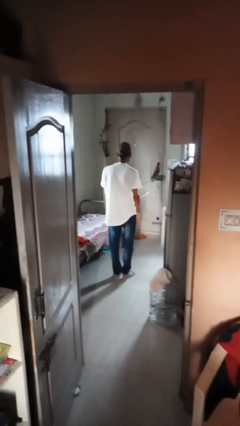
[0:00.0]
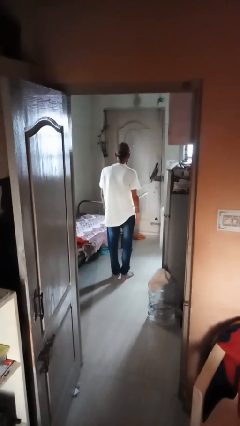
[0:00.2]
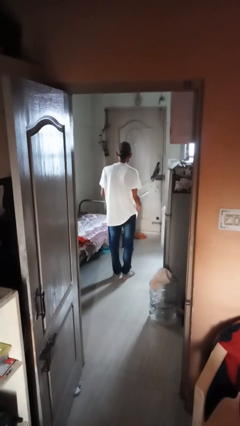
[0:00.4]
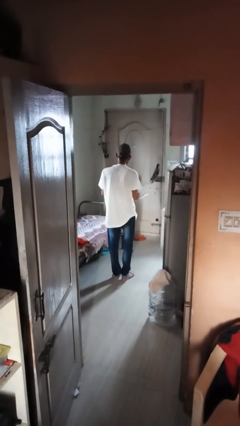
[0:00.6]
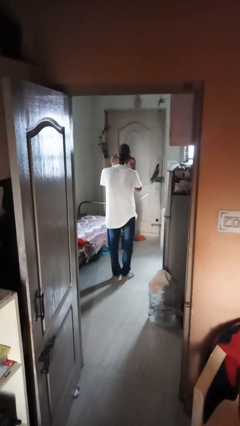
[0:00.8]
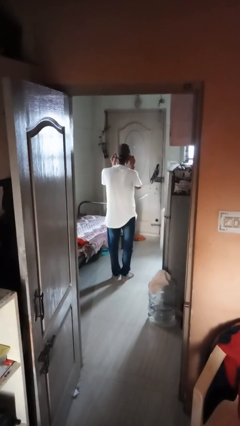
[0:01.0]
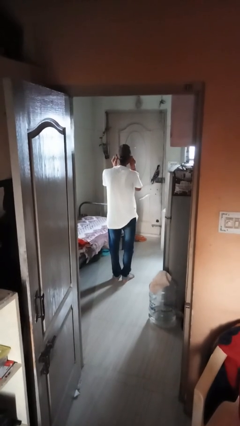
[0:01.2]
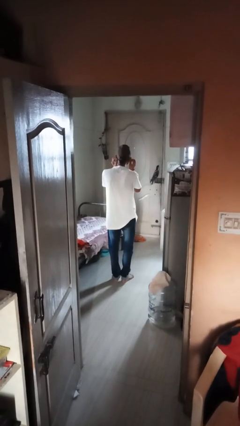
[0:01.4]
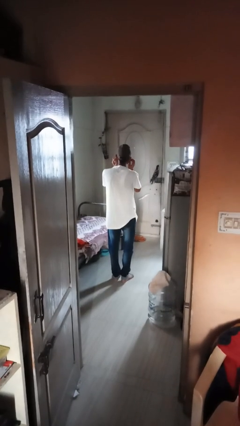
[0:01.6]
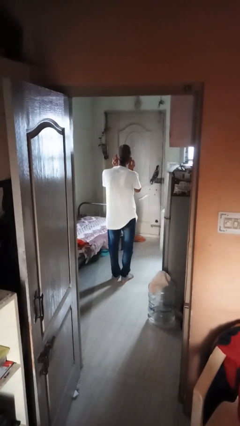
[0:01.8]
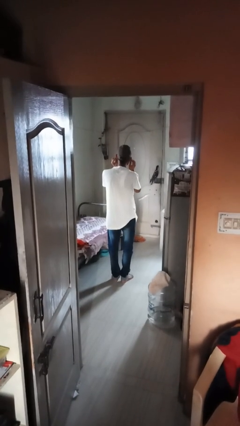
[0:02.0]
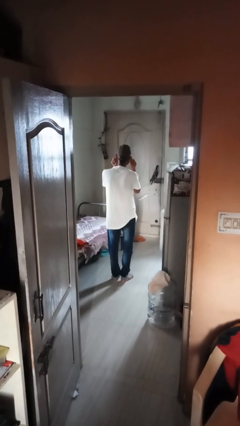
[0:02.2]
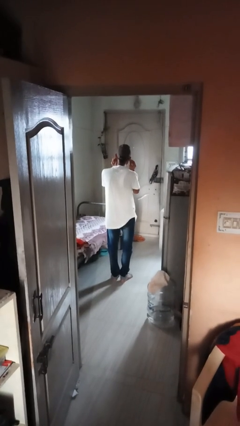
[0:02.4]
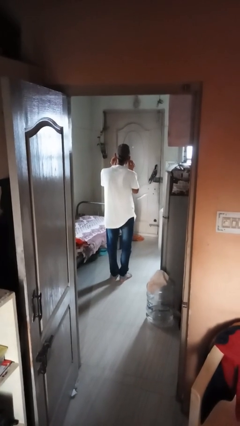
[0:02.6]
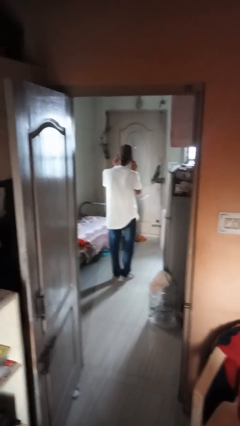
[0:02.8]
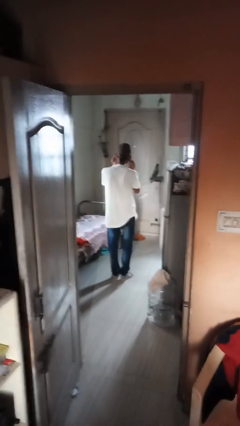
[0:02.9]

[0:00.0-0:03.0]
person touches earlobe

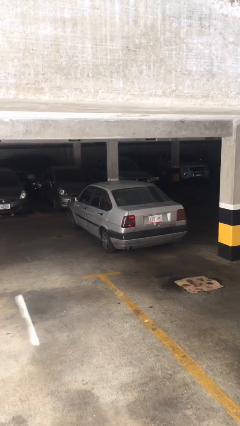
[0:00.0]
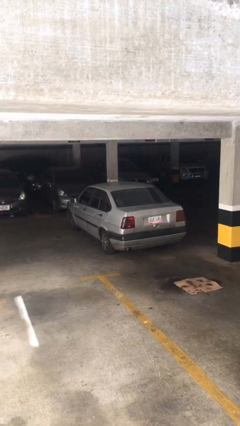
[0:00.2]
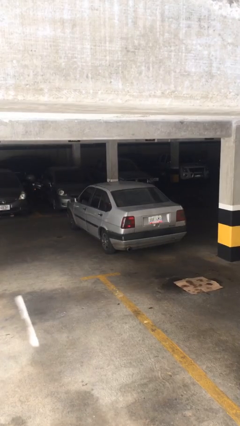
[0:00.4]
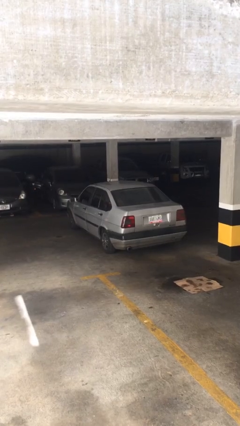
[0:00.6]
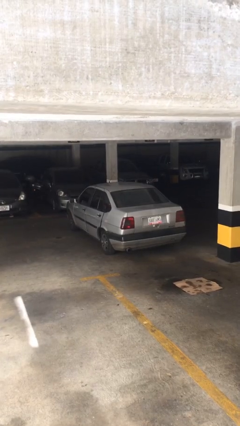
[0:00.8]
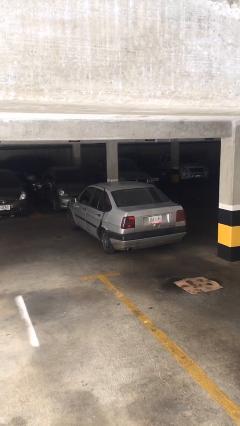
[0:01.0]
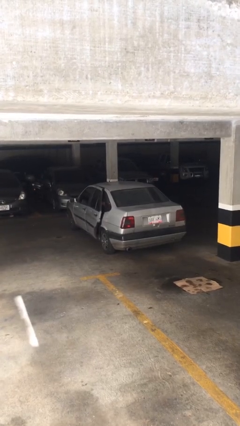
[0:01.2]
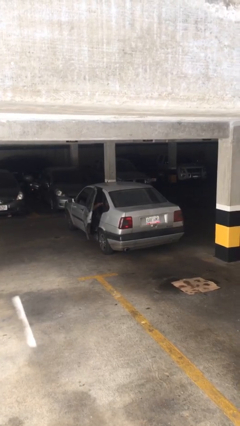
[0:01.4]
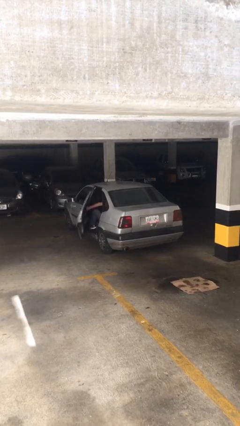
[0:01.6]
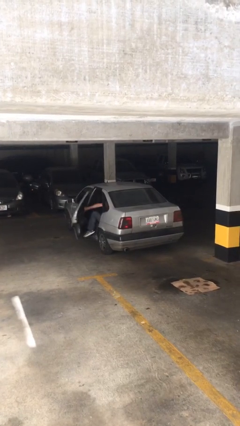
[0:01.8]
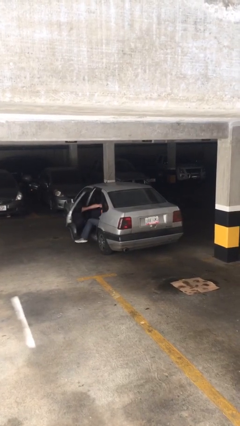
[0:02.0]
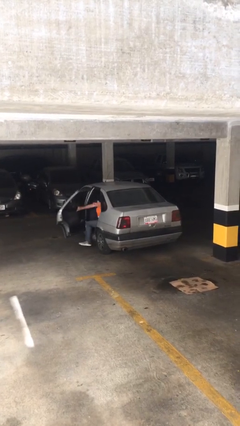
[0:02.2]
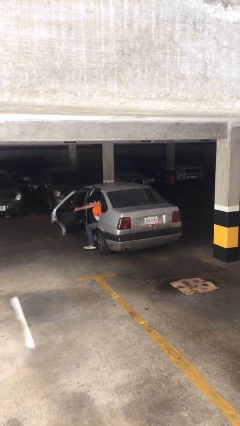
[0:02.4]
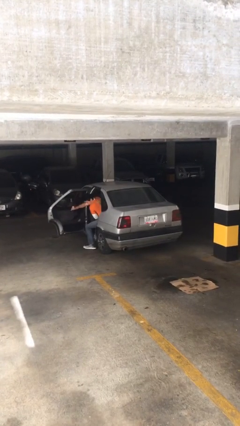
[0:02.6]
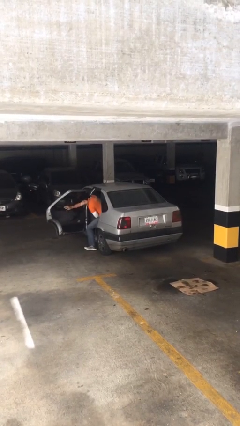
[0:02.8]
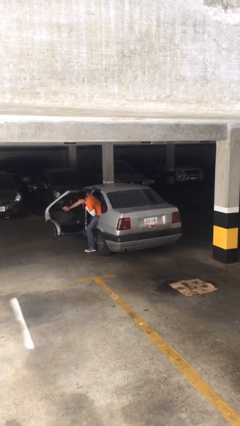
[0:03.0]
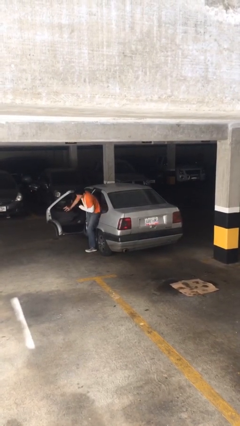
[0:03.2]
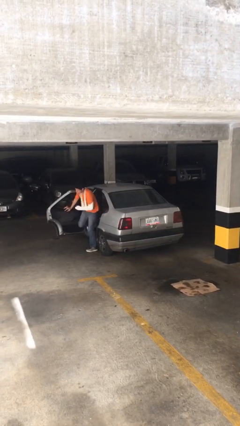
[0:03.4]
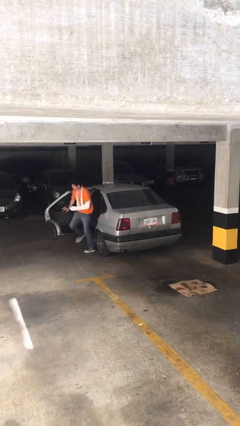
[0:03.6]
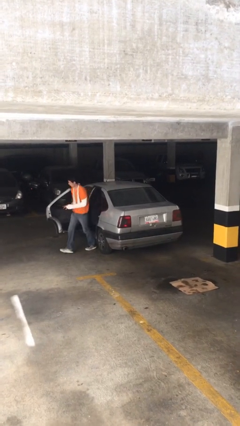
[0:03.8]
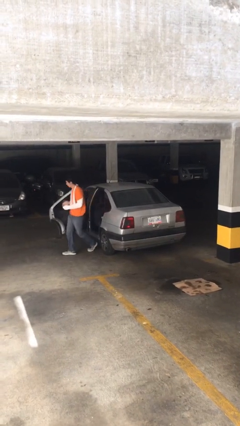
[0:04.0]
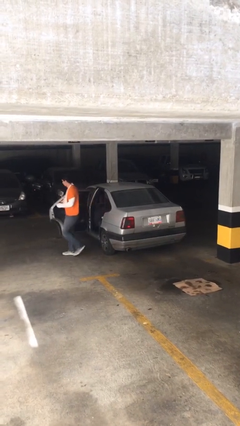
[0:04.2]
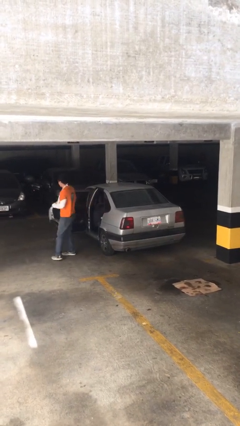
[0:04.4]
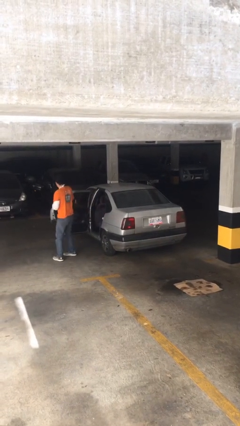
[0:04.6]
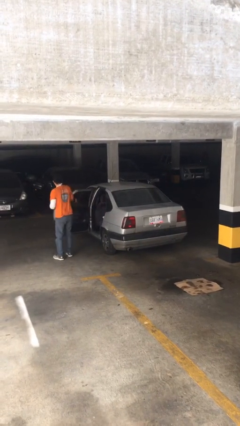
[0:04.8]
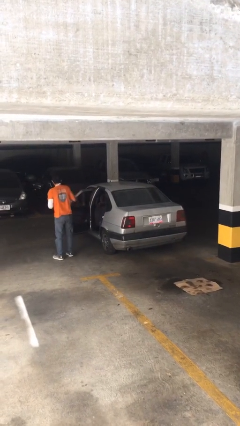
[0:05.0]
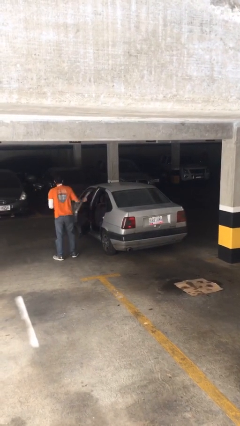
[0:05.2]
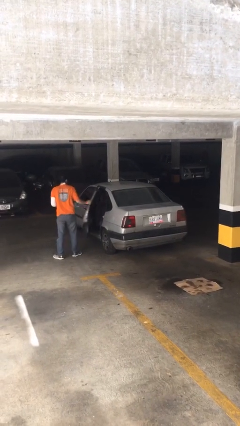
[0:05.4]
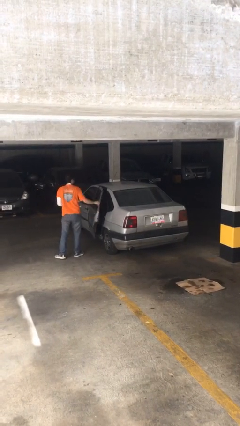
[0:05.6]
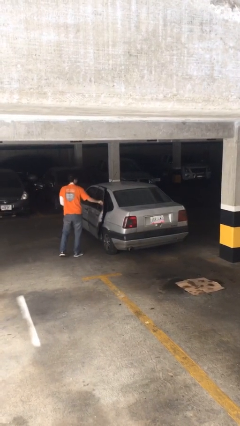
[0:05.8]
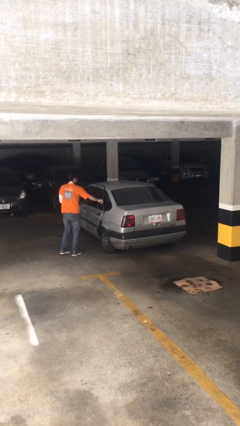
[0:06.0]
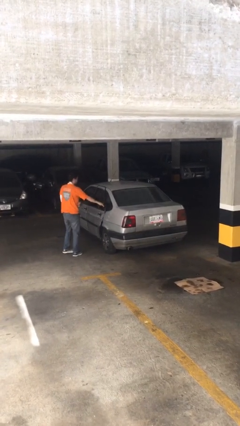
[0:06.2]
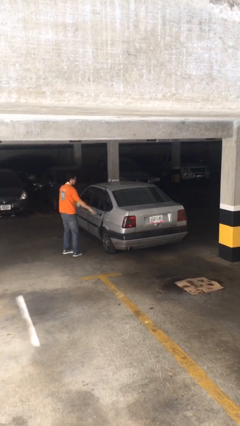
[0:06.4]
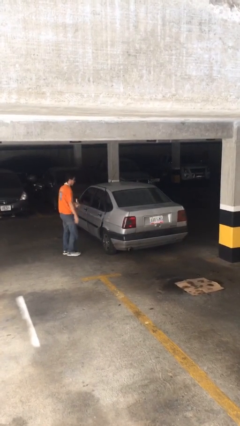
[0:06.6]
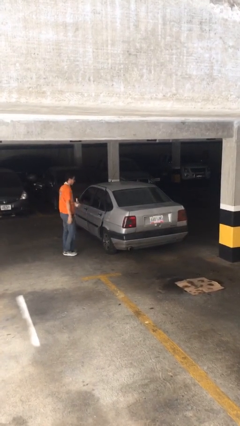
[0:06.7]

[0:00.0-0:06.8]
car drops off person

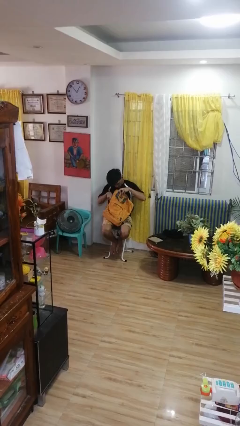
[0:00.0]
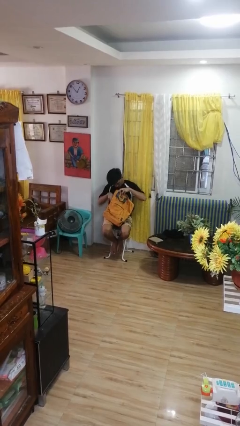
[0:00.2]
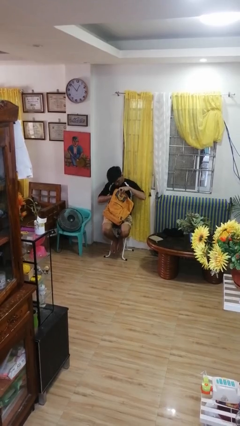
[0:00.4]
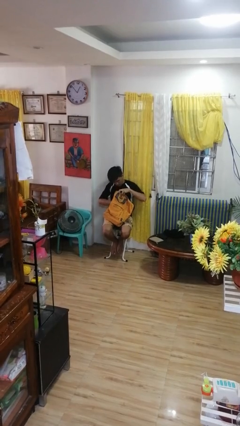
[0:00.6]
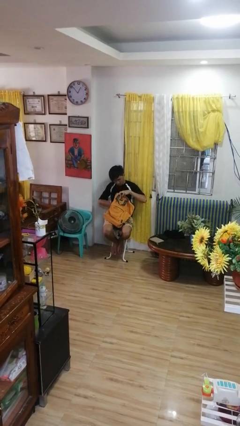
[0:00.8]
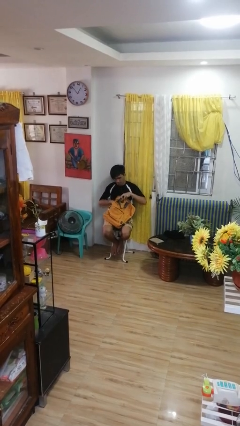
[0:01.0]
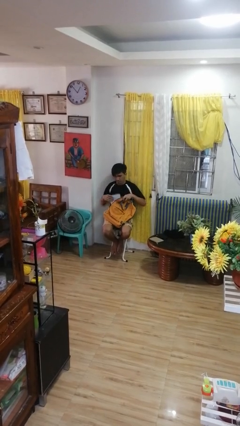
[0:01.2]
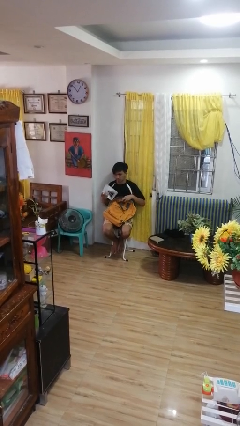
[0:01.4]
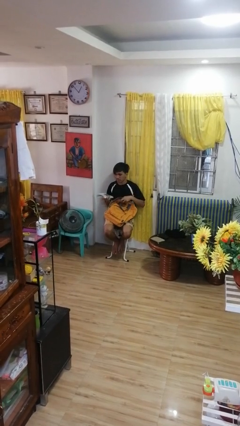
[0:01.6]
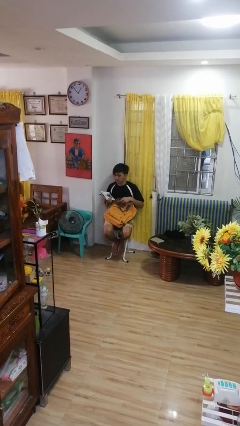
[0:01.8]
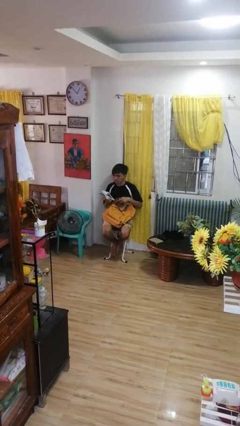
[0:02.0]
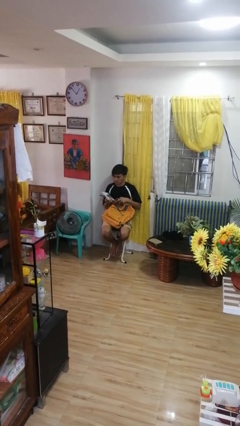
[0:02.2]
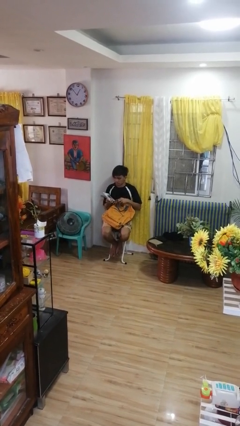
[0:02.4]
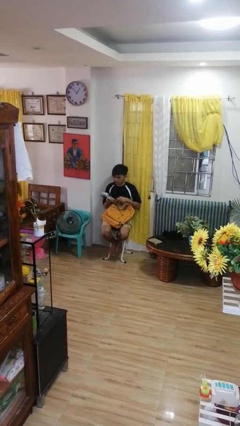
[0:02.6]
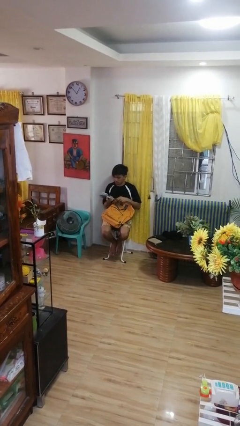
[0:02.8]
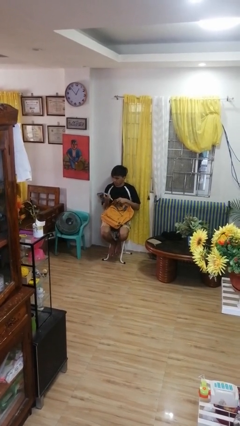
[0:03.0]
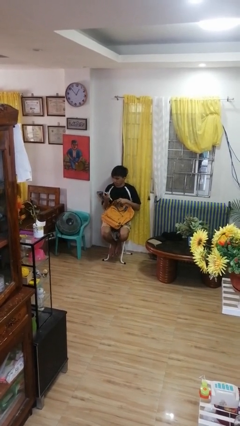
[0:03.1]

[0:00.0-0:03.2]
person takes object from backpack

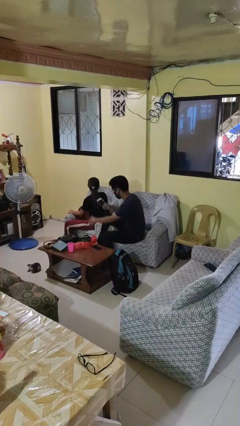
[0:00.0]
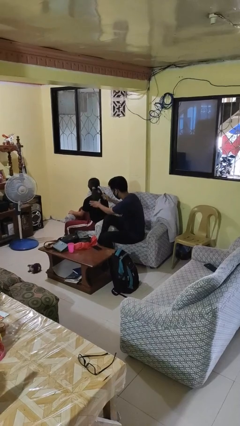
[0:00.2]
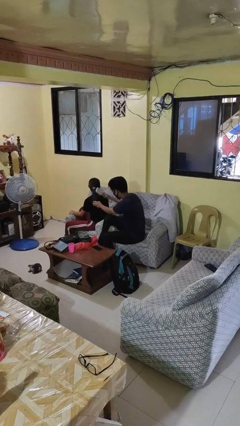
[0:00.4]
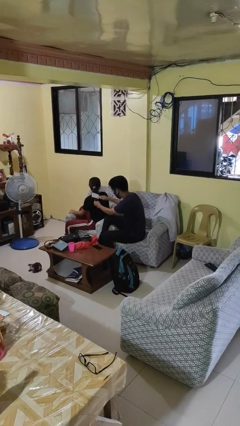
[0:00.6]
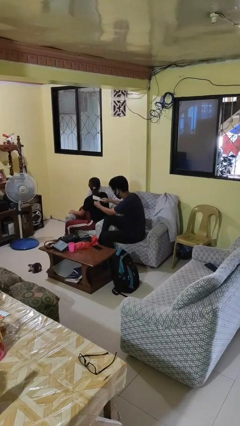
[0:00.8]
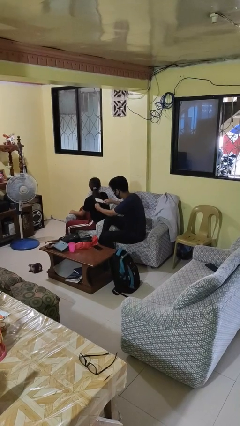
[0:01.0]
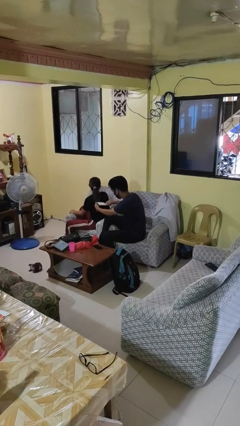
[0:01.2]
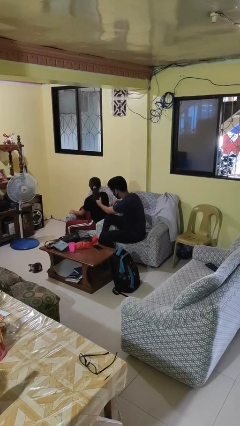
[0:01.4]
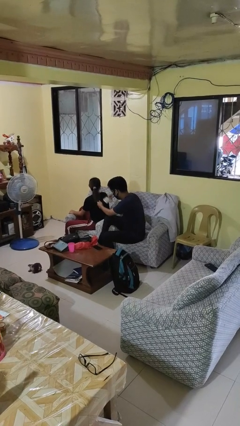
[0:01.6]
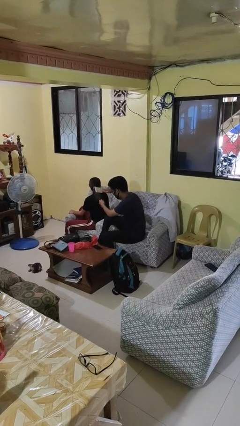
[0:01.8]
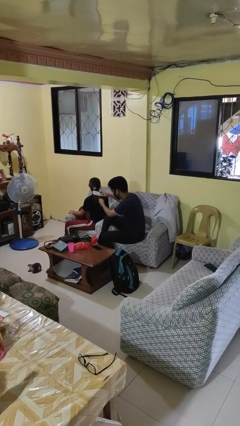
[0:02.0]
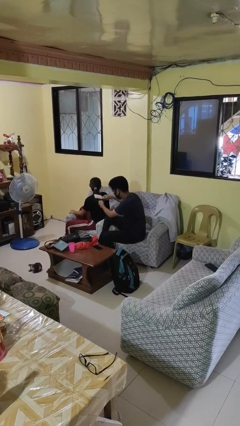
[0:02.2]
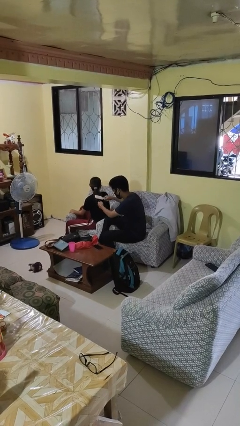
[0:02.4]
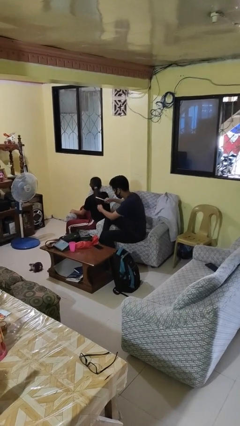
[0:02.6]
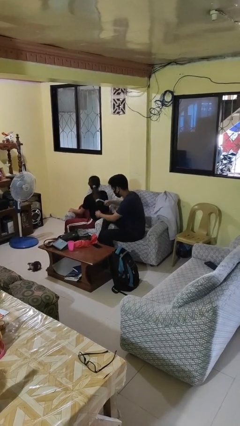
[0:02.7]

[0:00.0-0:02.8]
person brushes hair of person

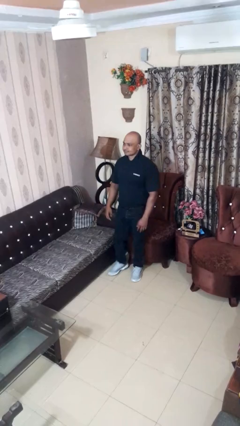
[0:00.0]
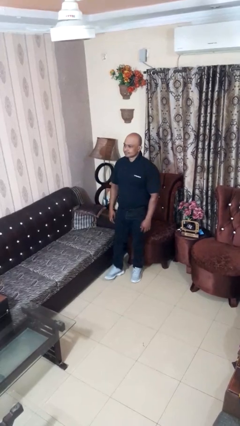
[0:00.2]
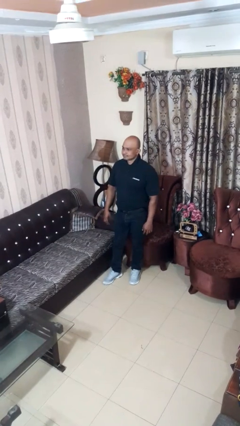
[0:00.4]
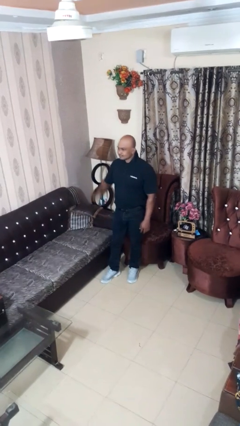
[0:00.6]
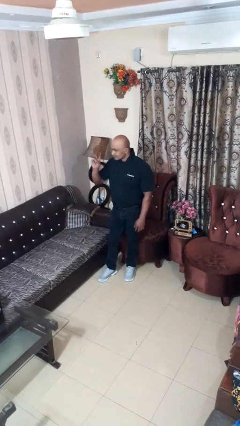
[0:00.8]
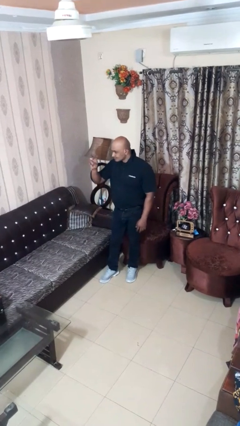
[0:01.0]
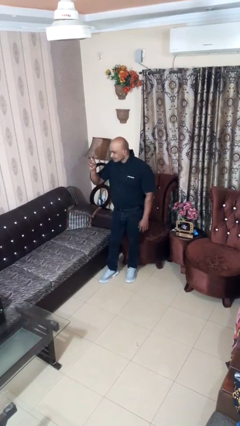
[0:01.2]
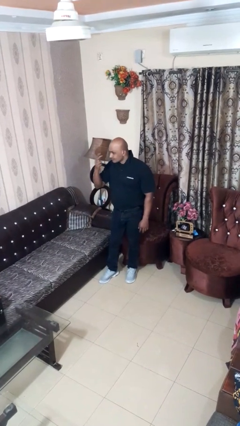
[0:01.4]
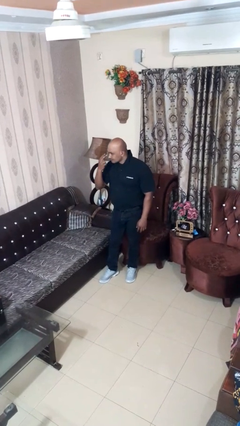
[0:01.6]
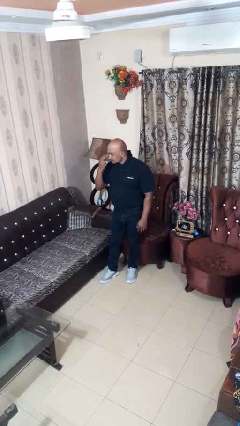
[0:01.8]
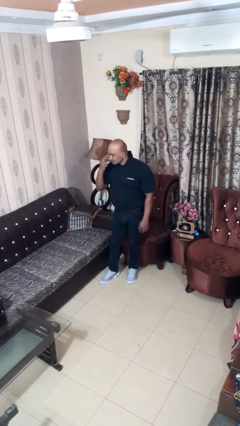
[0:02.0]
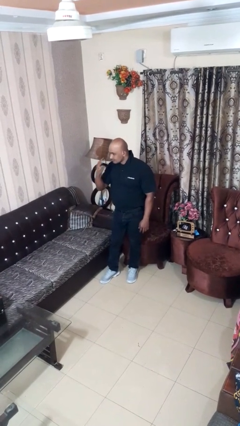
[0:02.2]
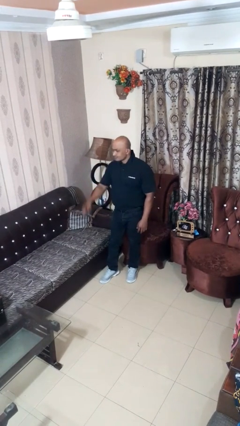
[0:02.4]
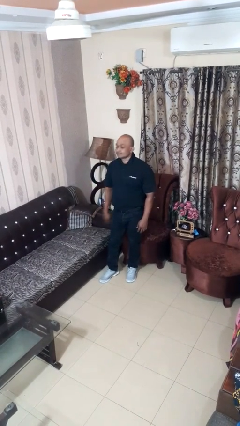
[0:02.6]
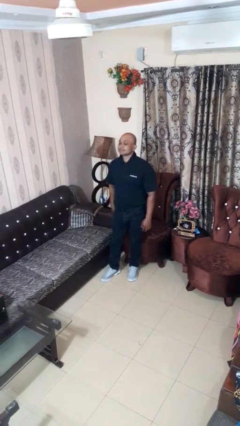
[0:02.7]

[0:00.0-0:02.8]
person gestures watch closely
